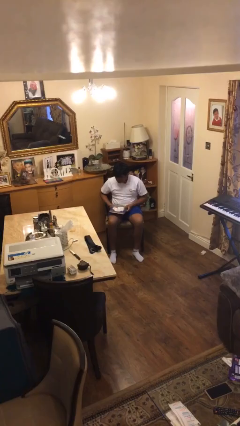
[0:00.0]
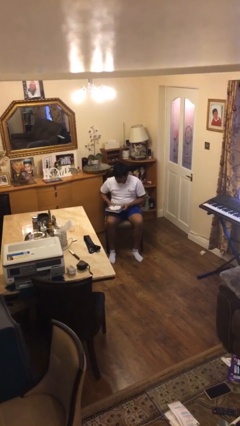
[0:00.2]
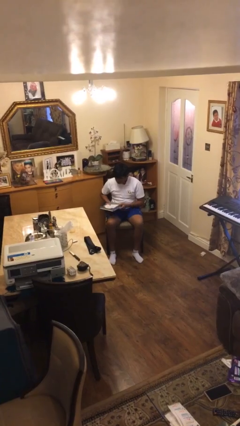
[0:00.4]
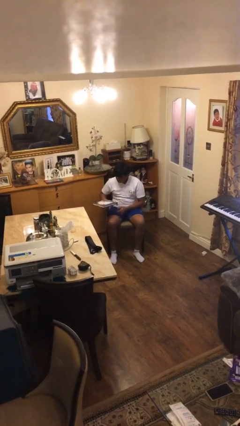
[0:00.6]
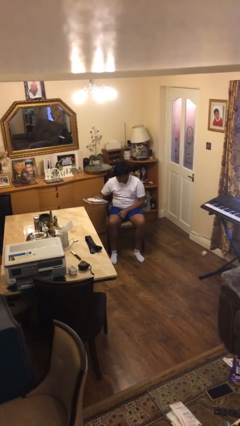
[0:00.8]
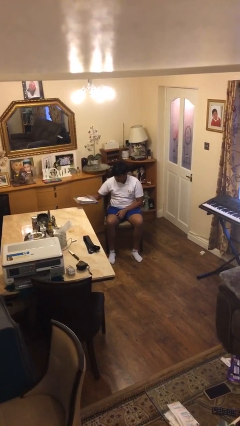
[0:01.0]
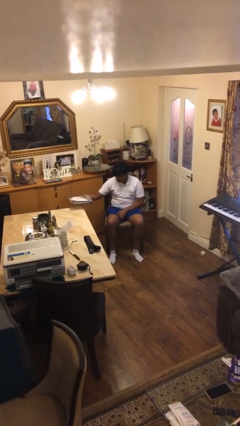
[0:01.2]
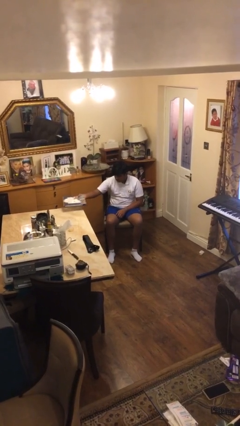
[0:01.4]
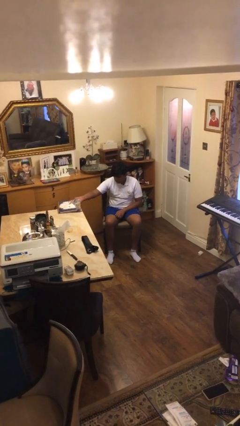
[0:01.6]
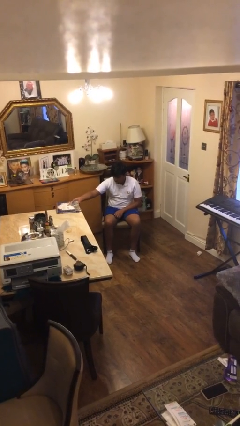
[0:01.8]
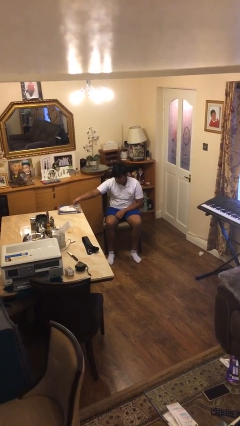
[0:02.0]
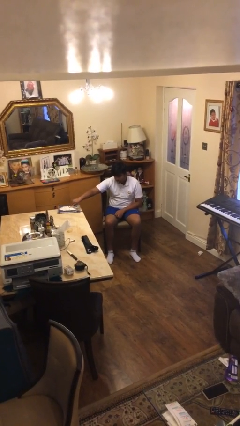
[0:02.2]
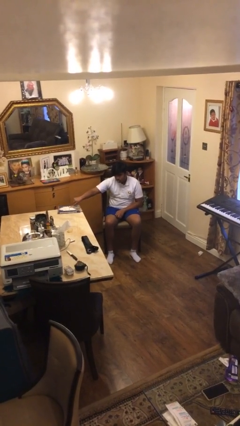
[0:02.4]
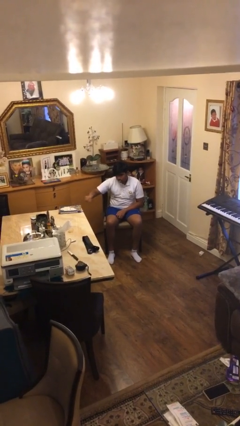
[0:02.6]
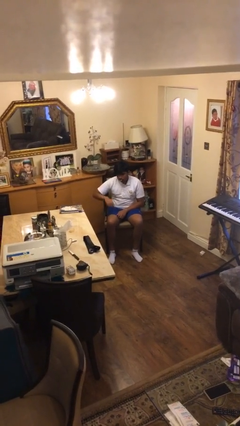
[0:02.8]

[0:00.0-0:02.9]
person puts down object on table

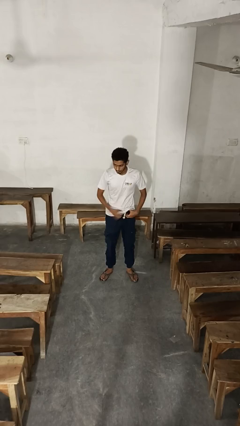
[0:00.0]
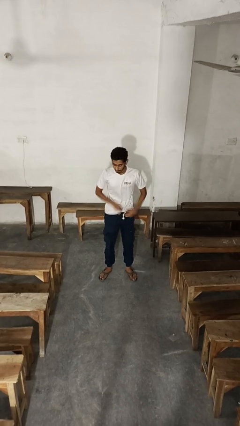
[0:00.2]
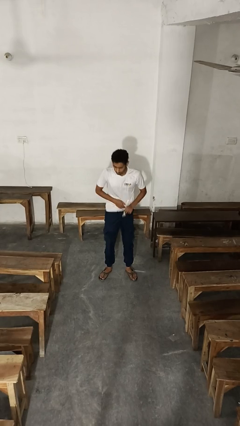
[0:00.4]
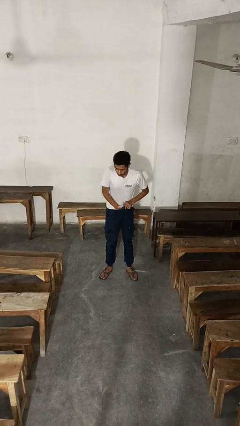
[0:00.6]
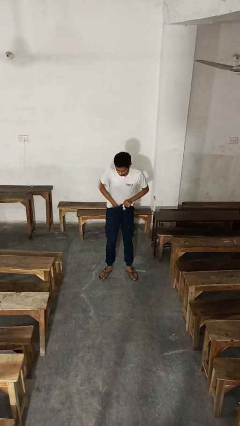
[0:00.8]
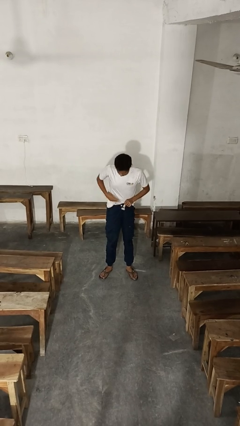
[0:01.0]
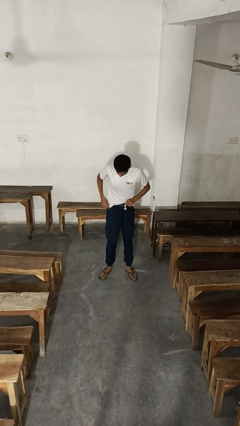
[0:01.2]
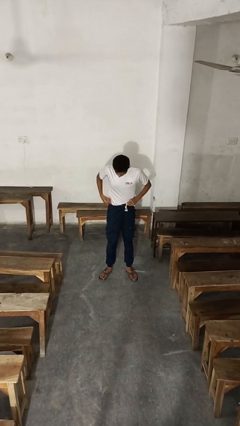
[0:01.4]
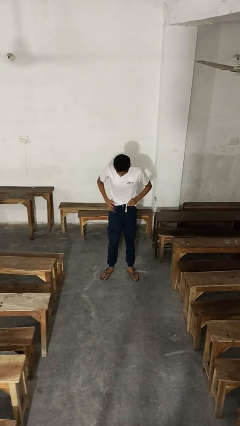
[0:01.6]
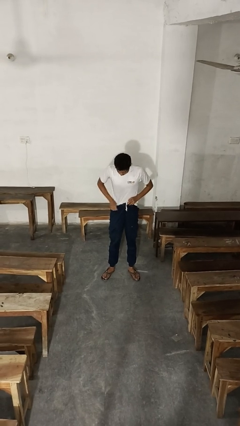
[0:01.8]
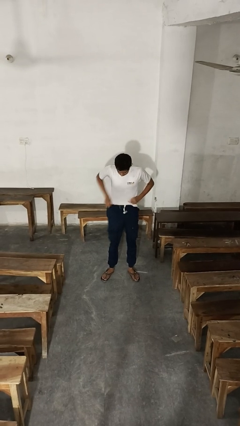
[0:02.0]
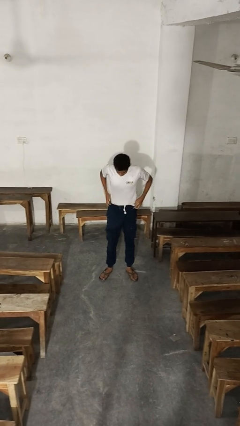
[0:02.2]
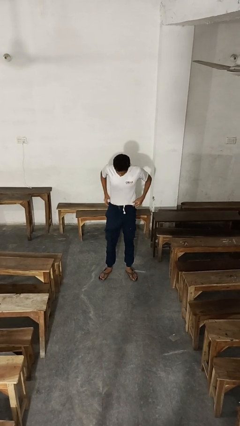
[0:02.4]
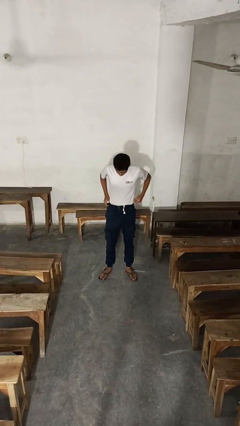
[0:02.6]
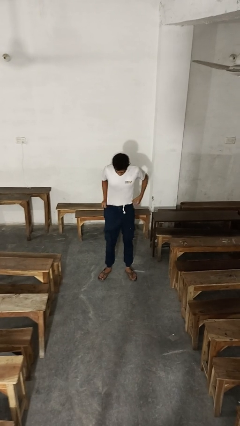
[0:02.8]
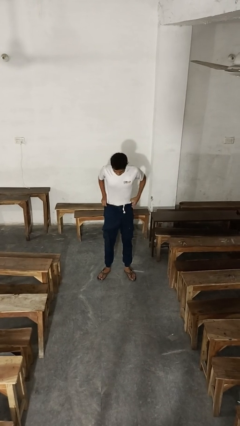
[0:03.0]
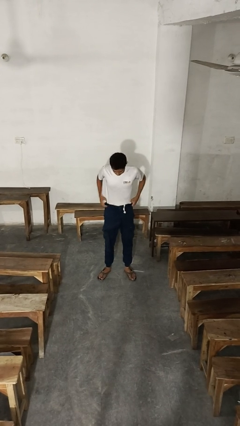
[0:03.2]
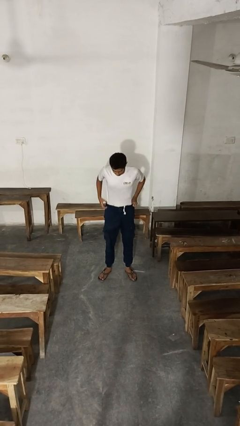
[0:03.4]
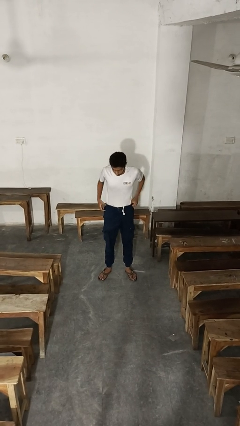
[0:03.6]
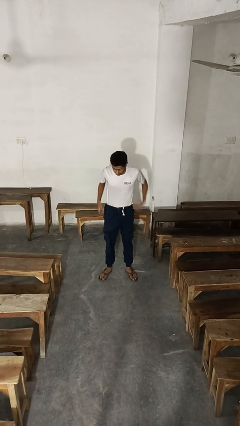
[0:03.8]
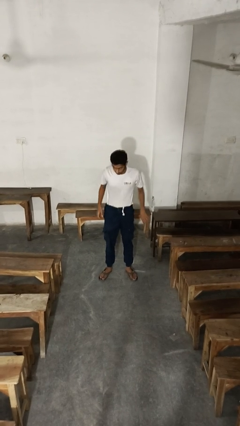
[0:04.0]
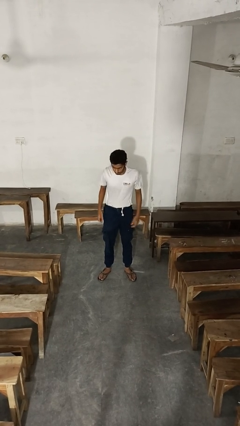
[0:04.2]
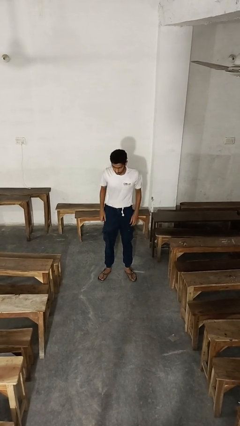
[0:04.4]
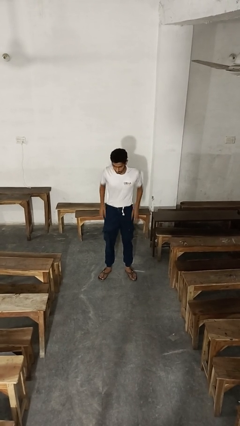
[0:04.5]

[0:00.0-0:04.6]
person tucks in shirt

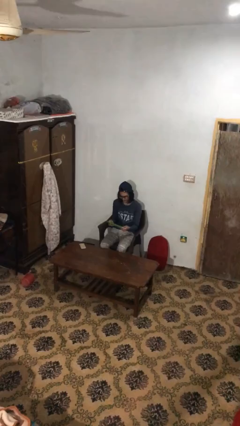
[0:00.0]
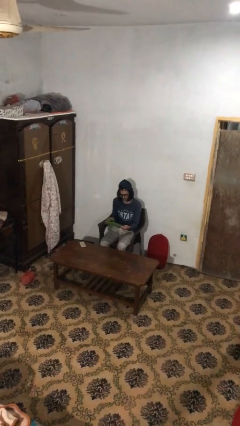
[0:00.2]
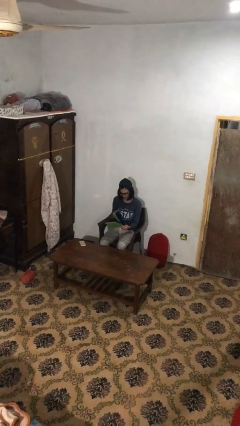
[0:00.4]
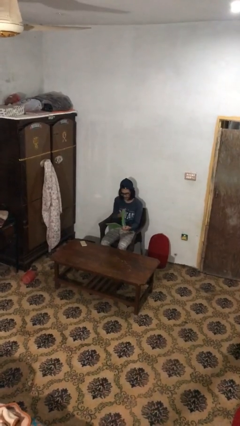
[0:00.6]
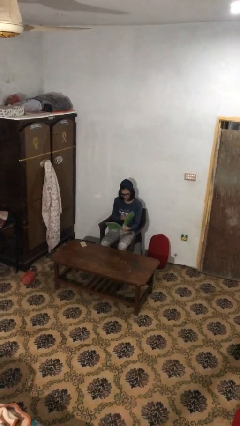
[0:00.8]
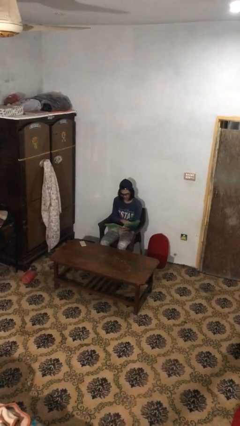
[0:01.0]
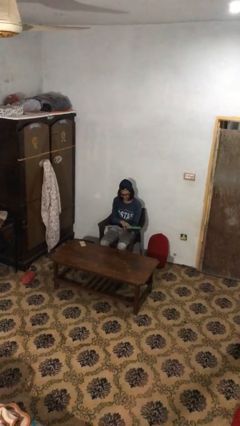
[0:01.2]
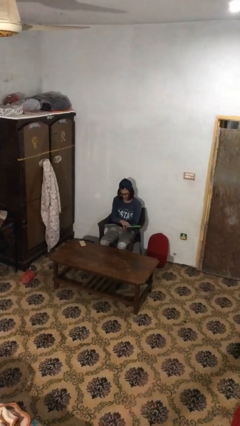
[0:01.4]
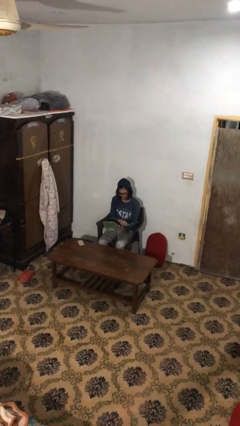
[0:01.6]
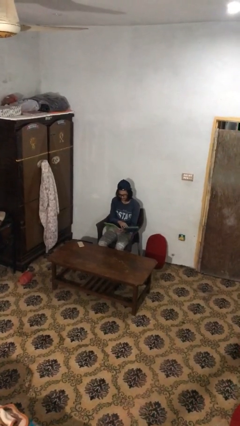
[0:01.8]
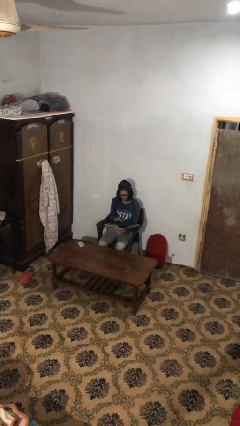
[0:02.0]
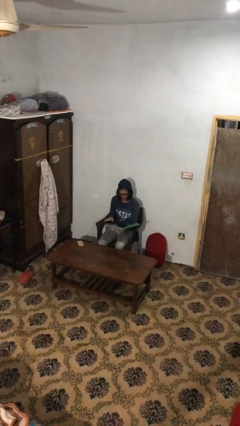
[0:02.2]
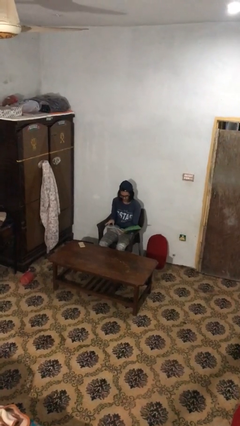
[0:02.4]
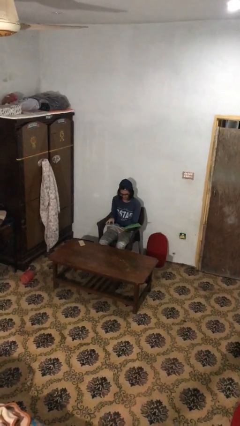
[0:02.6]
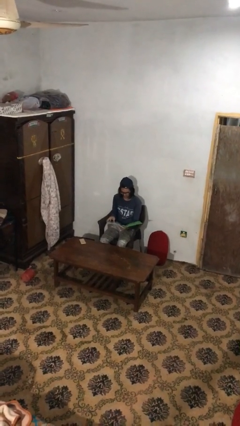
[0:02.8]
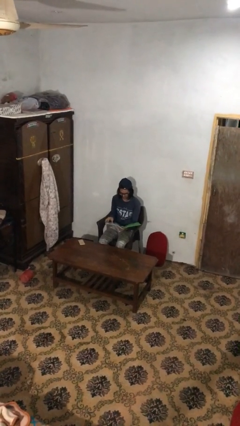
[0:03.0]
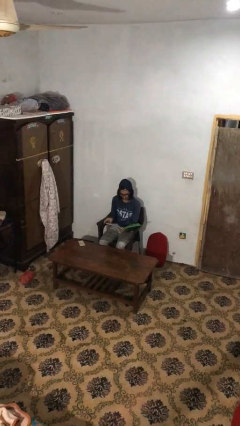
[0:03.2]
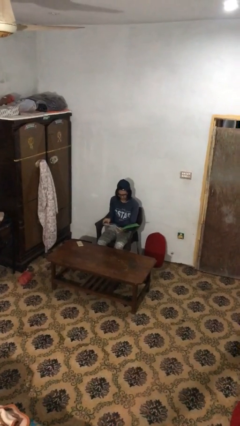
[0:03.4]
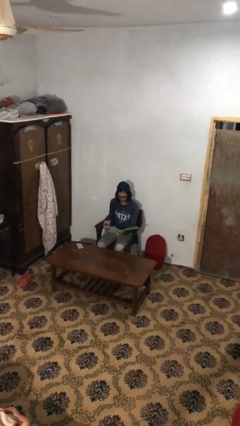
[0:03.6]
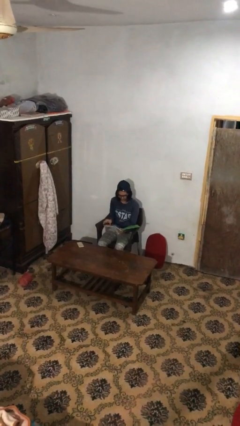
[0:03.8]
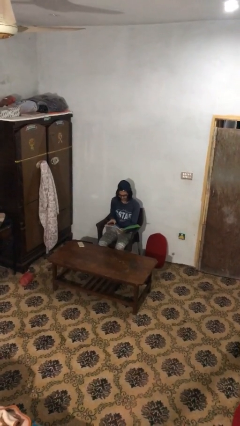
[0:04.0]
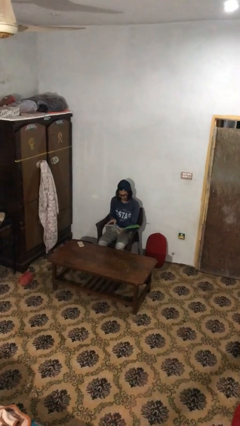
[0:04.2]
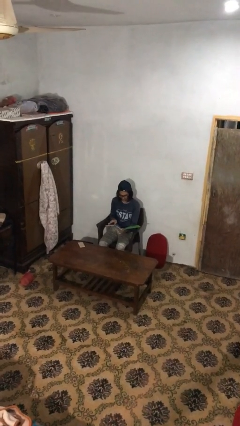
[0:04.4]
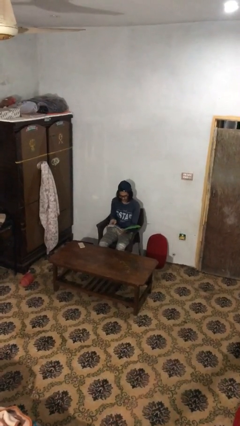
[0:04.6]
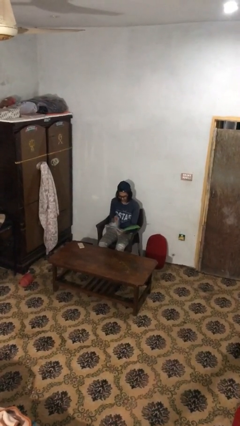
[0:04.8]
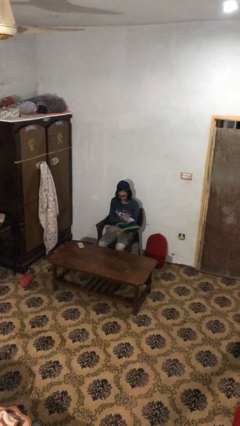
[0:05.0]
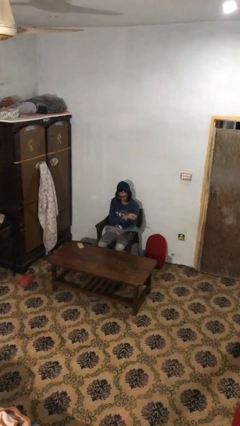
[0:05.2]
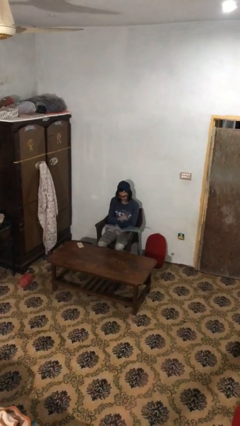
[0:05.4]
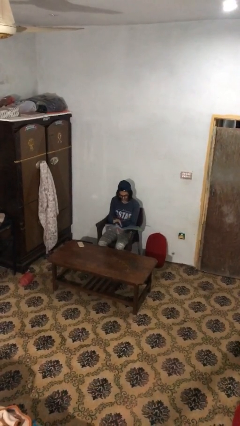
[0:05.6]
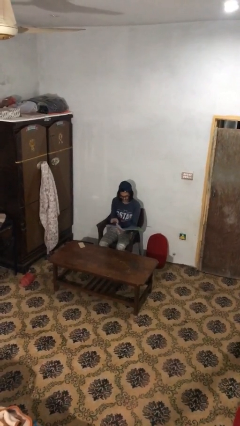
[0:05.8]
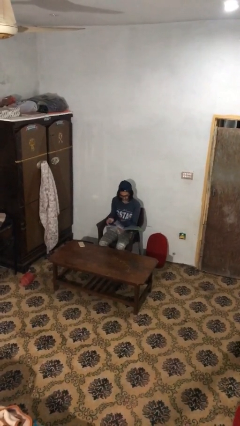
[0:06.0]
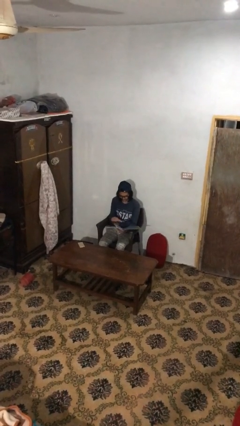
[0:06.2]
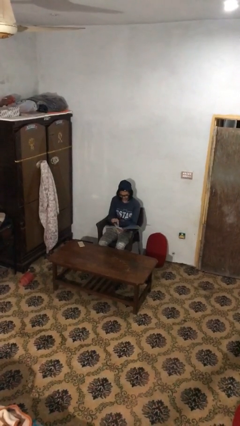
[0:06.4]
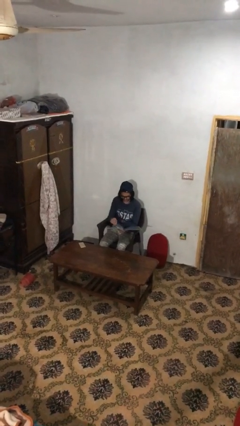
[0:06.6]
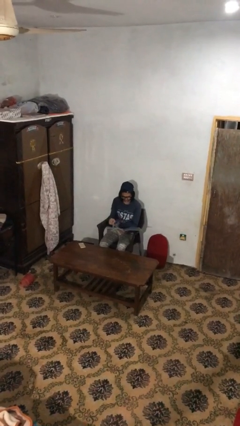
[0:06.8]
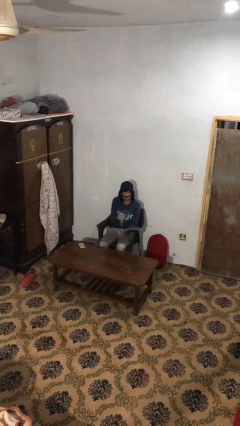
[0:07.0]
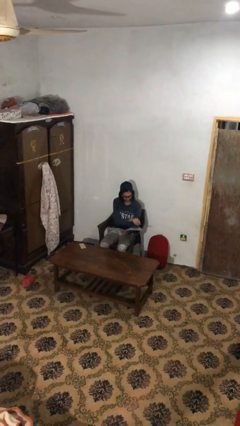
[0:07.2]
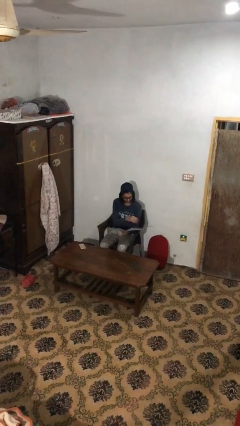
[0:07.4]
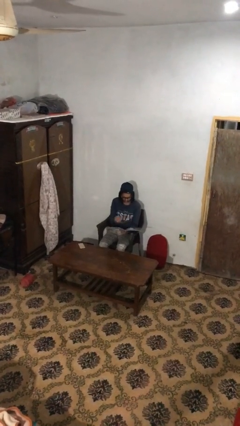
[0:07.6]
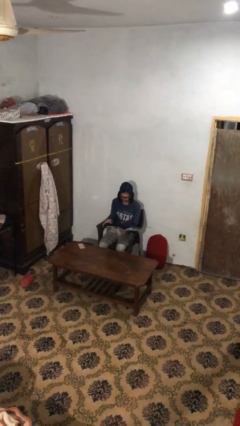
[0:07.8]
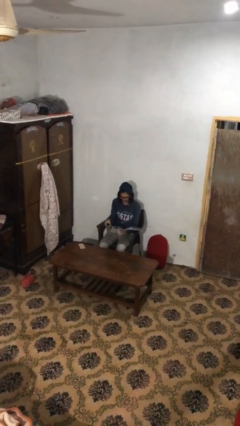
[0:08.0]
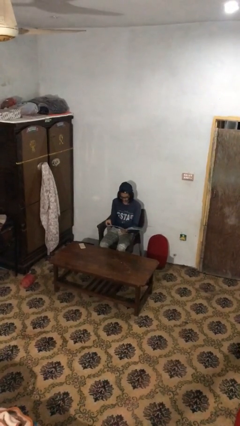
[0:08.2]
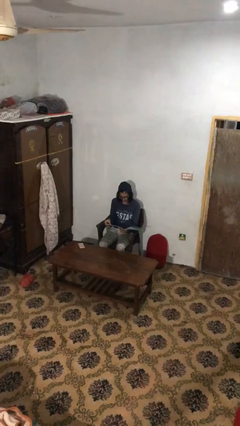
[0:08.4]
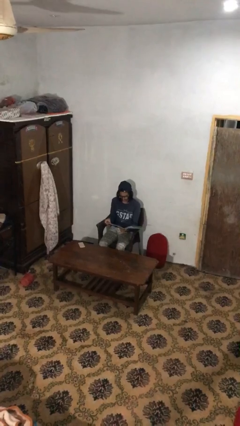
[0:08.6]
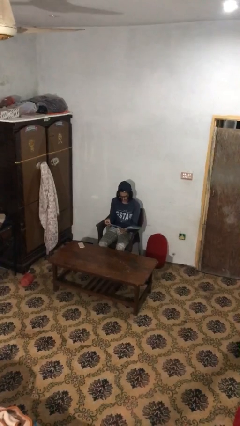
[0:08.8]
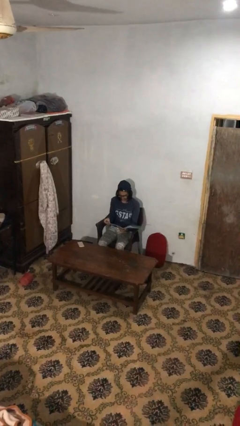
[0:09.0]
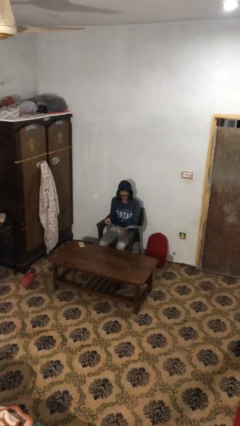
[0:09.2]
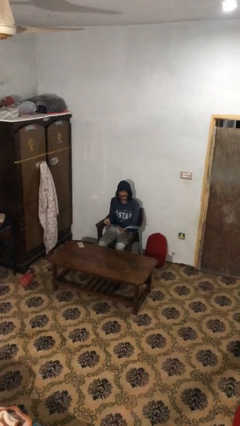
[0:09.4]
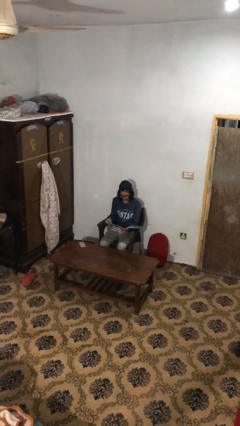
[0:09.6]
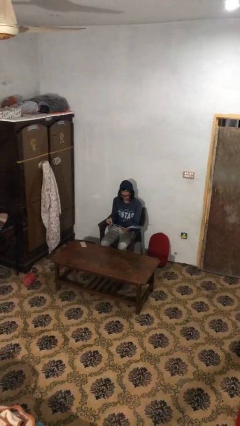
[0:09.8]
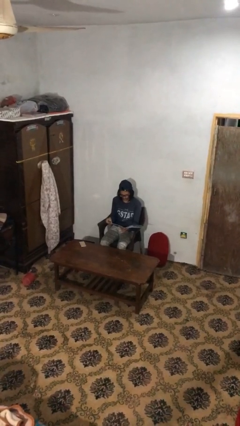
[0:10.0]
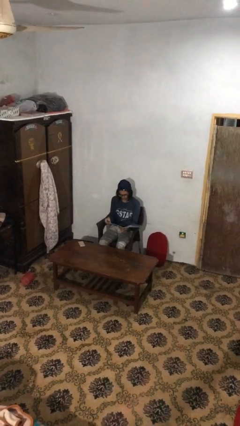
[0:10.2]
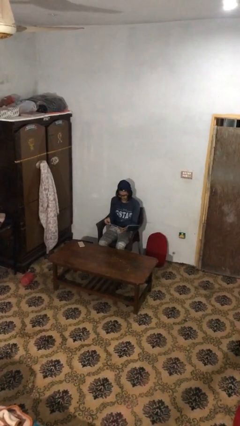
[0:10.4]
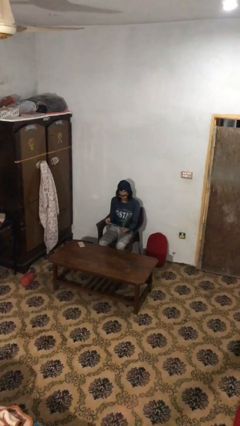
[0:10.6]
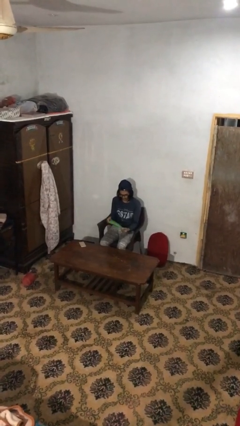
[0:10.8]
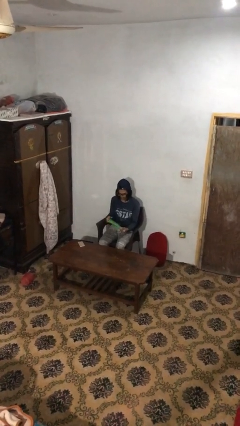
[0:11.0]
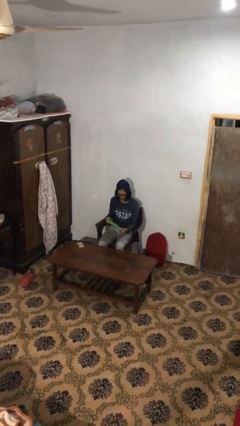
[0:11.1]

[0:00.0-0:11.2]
person reads document
